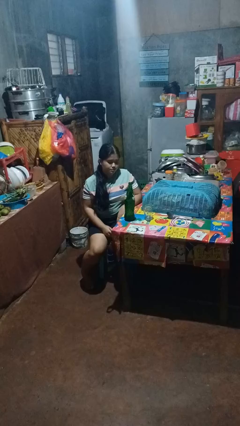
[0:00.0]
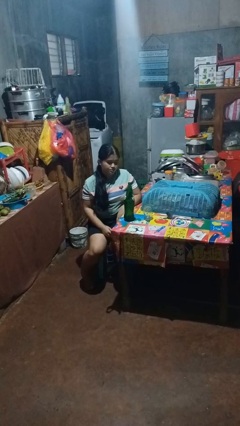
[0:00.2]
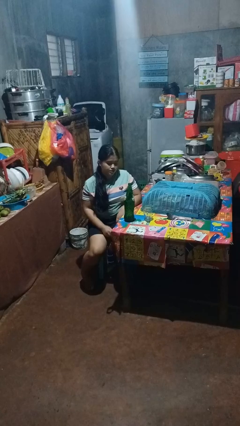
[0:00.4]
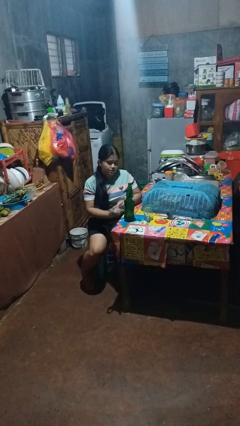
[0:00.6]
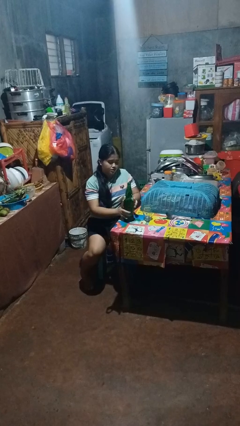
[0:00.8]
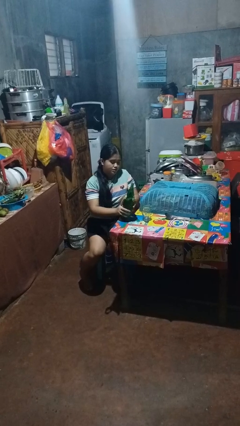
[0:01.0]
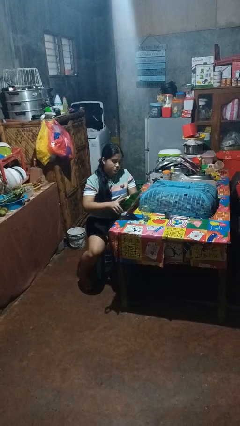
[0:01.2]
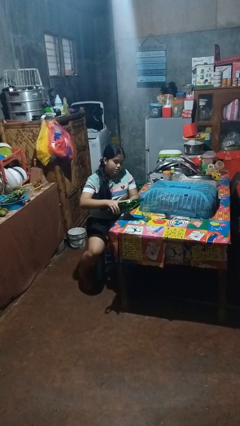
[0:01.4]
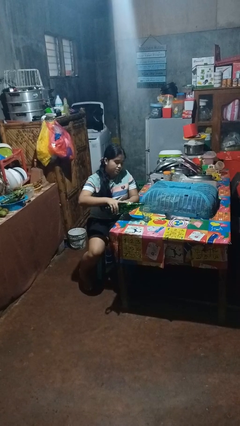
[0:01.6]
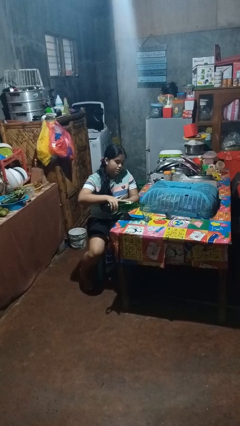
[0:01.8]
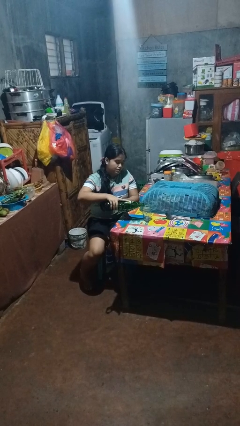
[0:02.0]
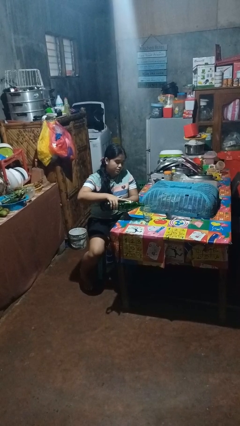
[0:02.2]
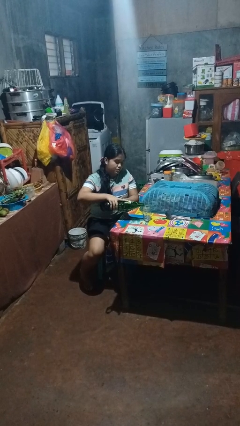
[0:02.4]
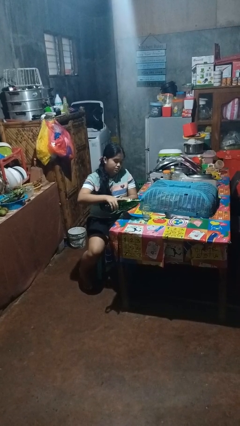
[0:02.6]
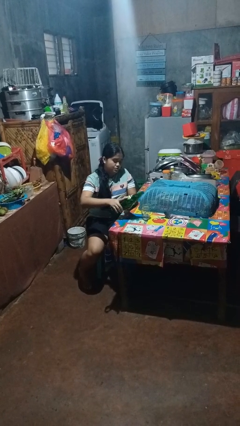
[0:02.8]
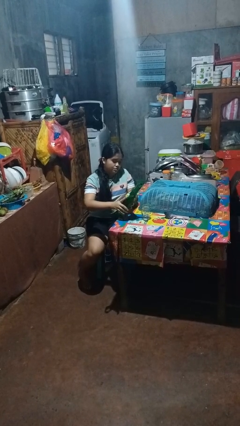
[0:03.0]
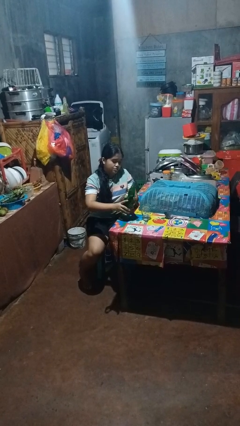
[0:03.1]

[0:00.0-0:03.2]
person pours liquid into cup

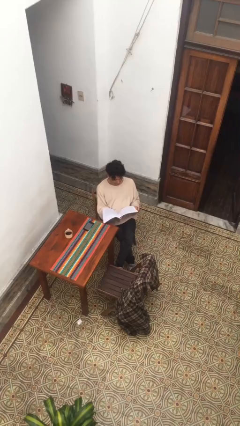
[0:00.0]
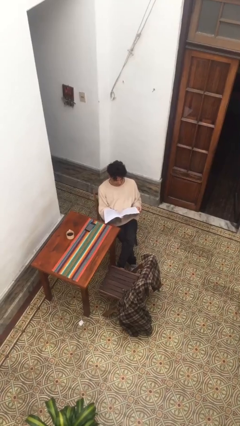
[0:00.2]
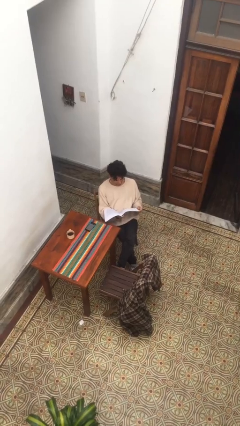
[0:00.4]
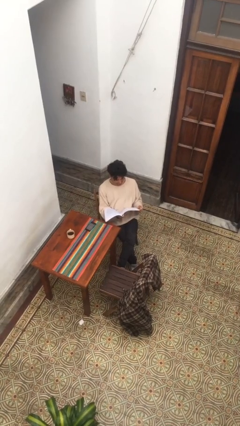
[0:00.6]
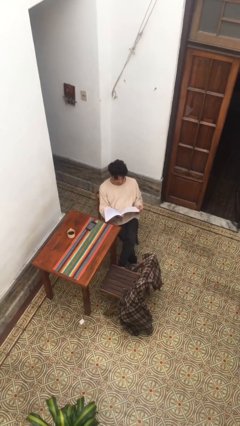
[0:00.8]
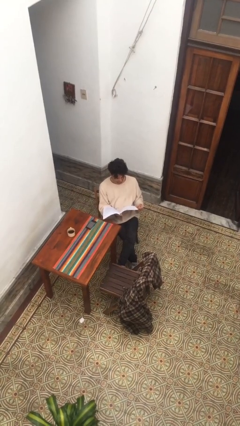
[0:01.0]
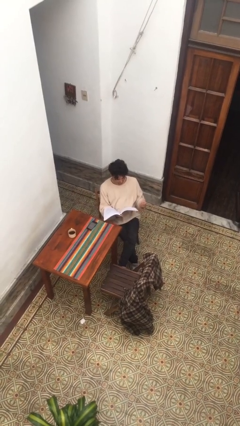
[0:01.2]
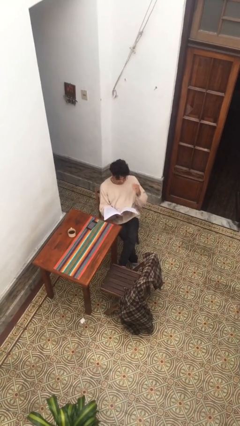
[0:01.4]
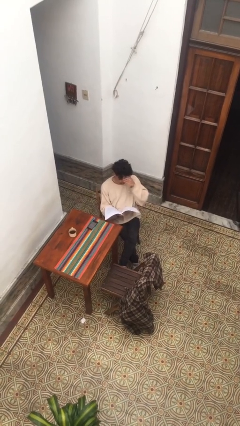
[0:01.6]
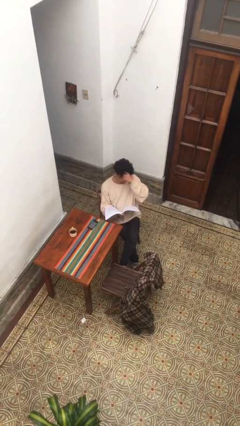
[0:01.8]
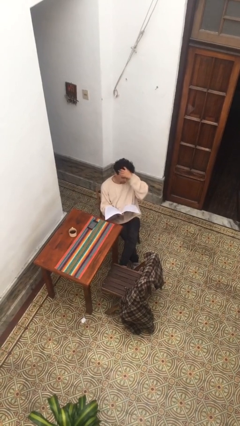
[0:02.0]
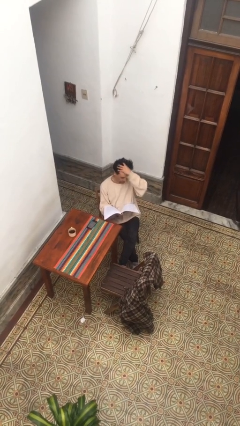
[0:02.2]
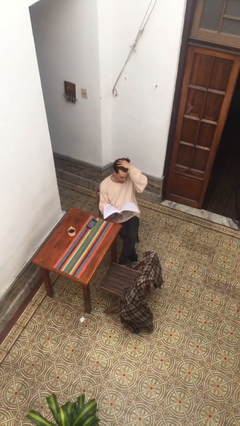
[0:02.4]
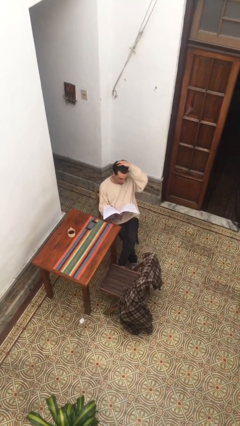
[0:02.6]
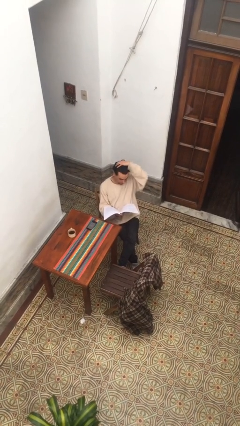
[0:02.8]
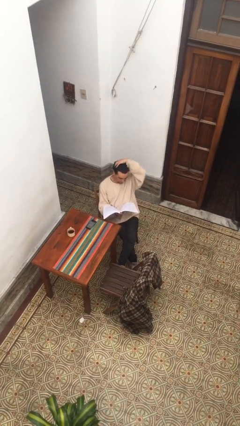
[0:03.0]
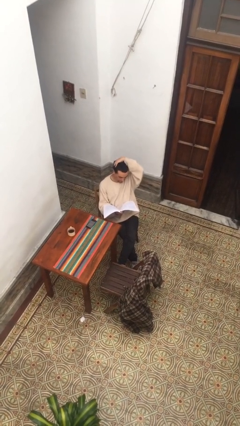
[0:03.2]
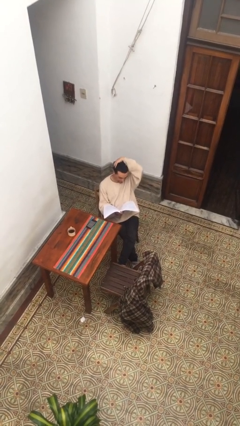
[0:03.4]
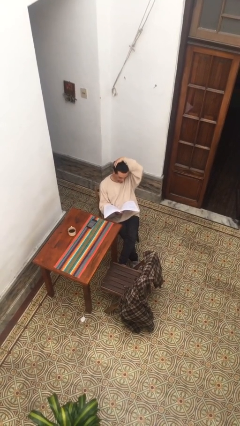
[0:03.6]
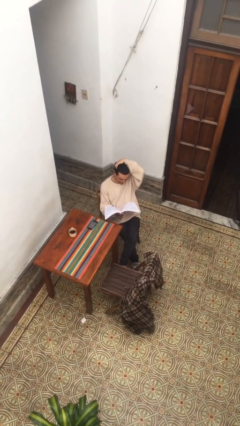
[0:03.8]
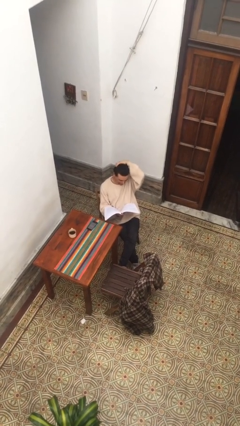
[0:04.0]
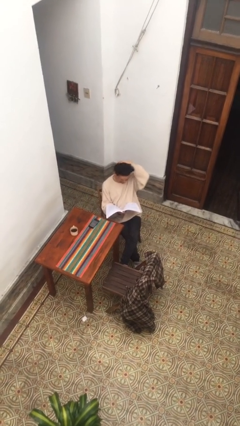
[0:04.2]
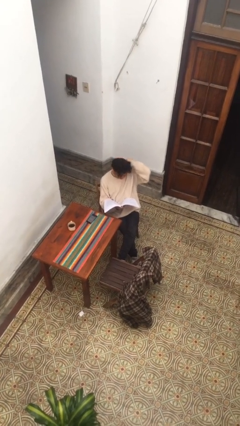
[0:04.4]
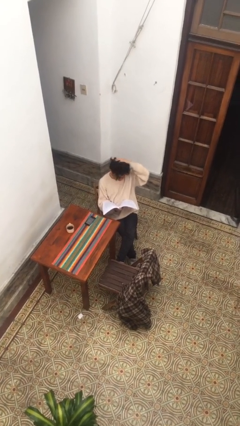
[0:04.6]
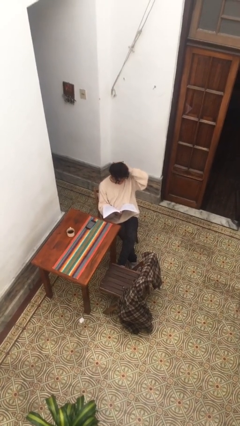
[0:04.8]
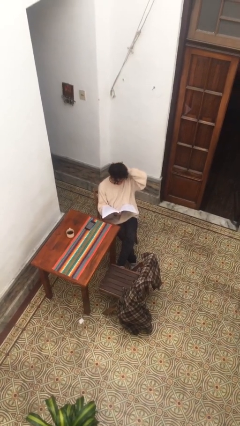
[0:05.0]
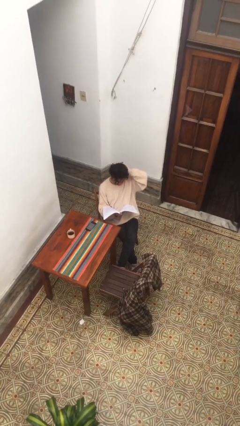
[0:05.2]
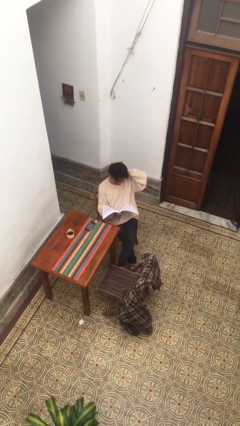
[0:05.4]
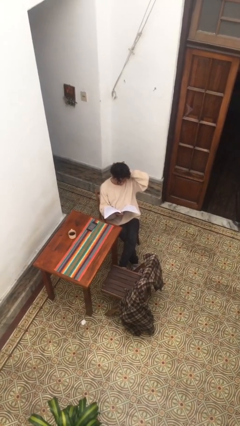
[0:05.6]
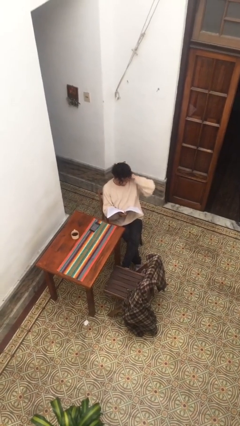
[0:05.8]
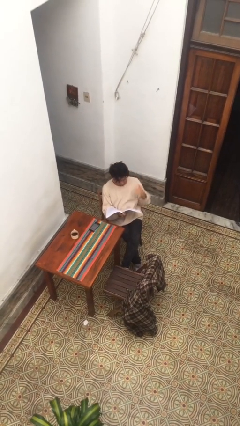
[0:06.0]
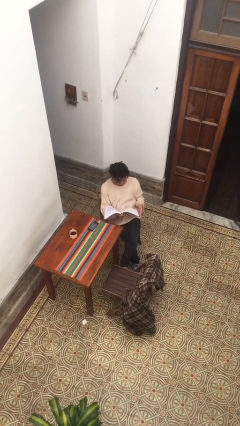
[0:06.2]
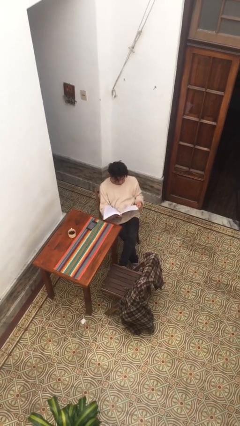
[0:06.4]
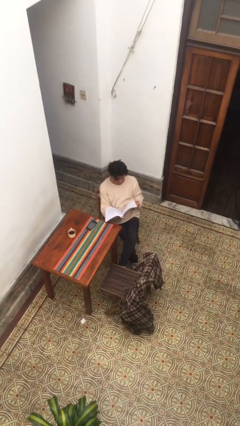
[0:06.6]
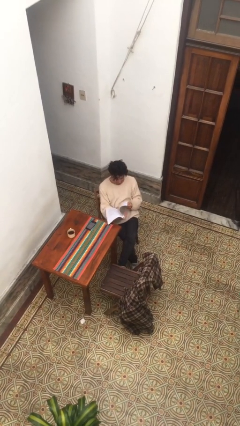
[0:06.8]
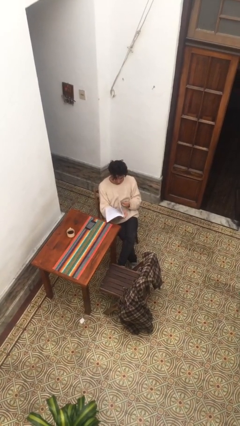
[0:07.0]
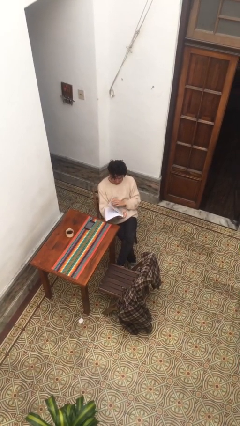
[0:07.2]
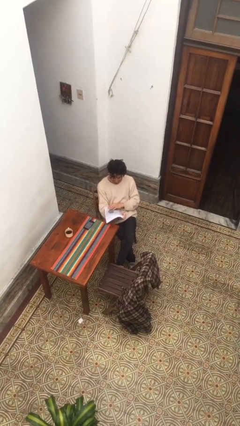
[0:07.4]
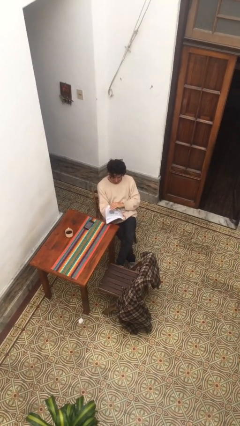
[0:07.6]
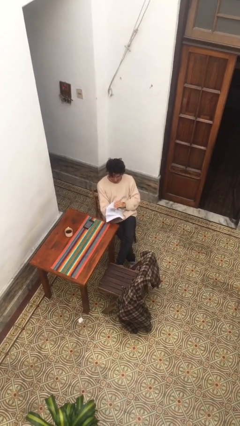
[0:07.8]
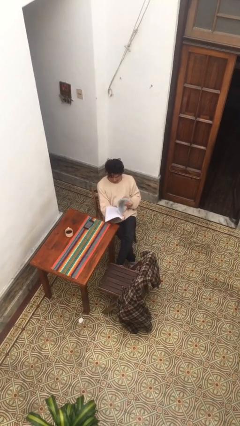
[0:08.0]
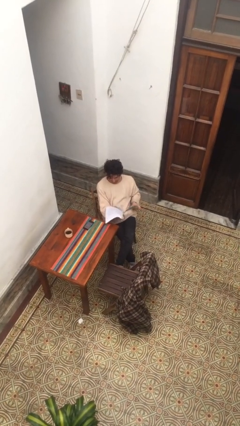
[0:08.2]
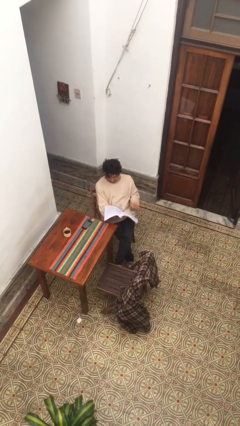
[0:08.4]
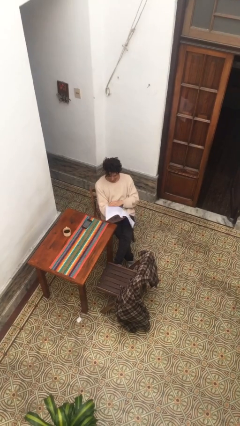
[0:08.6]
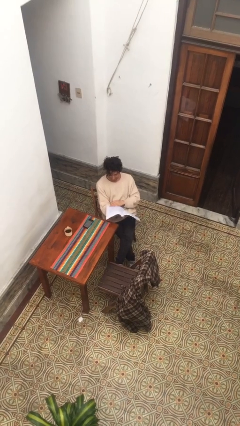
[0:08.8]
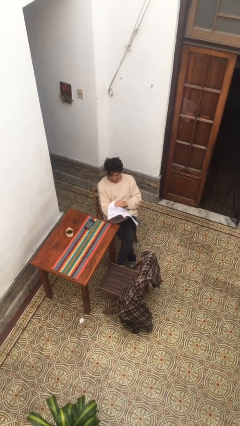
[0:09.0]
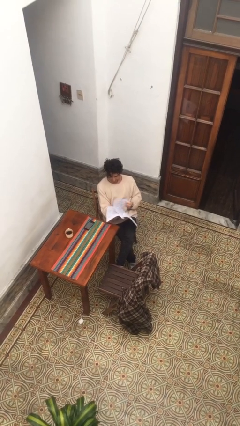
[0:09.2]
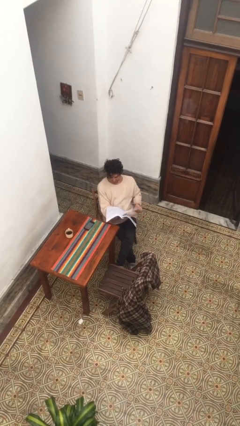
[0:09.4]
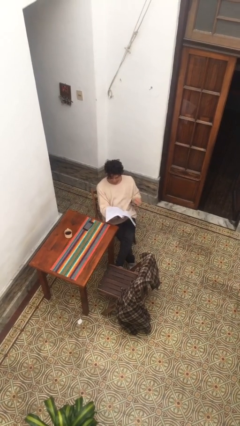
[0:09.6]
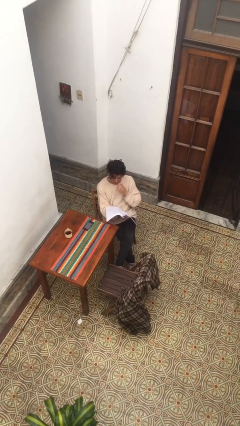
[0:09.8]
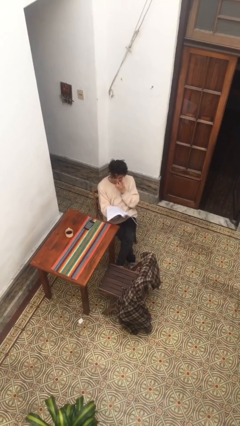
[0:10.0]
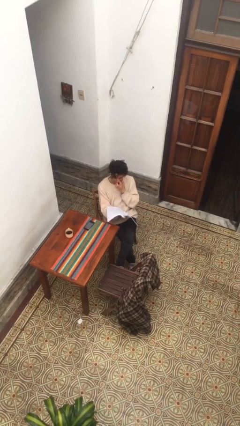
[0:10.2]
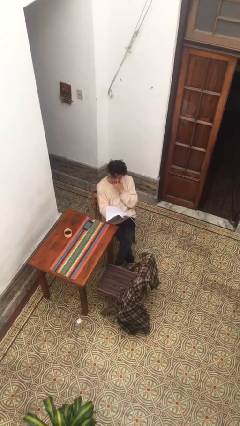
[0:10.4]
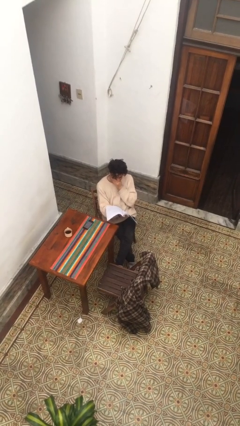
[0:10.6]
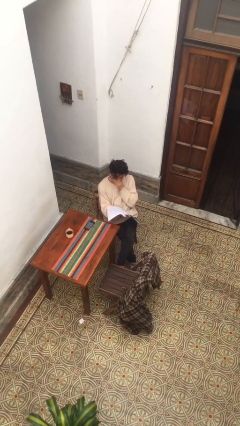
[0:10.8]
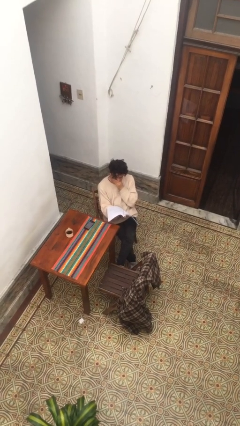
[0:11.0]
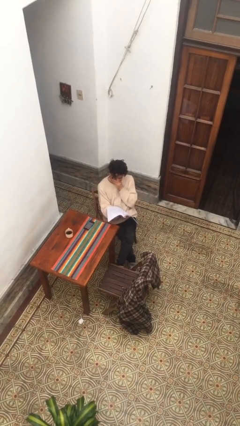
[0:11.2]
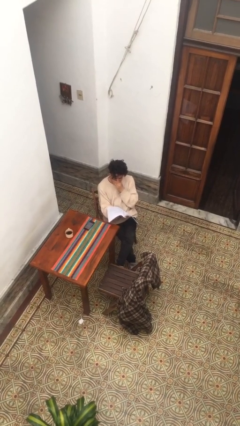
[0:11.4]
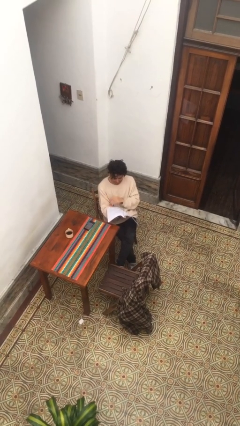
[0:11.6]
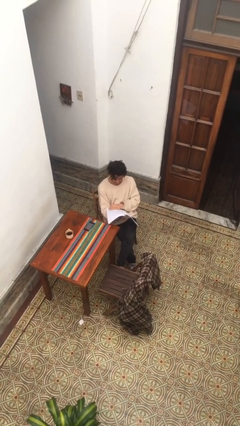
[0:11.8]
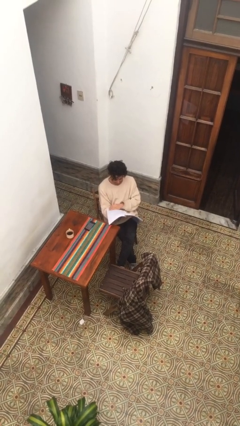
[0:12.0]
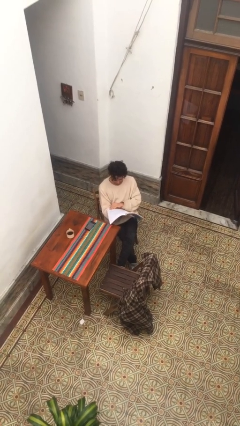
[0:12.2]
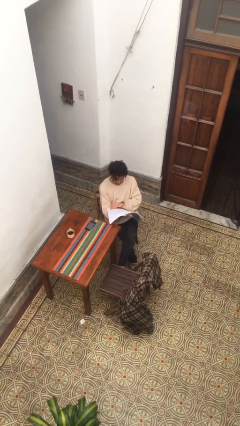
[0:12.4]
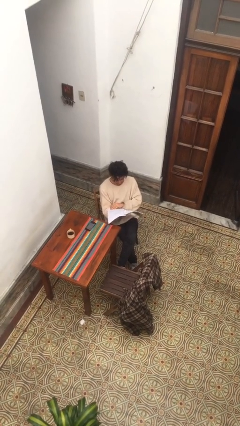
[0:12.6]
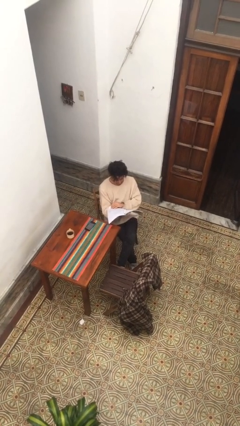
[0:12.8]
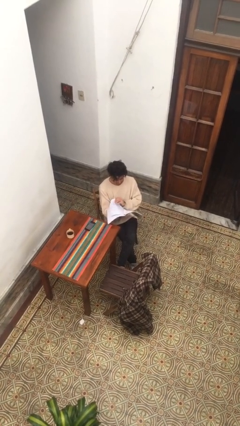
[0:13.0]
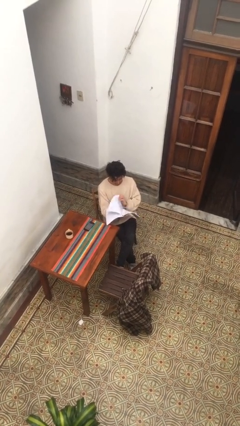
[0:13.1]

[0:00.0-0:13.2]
person reads document

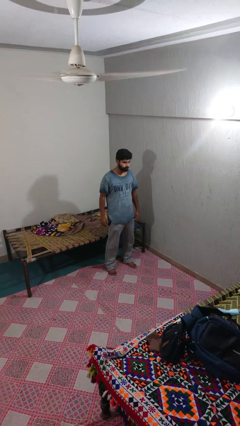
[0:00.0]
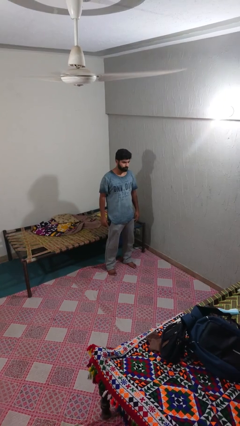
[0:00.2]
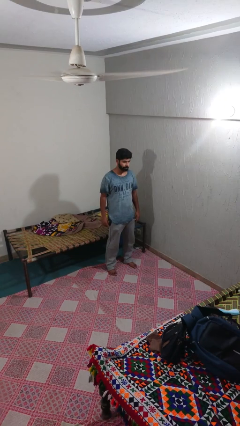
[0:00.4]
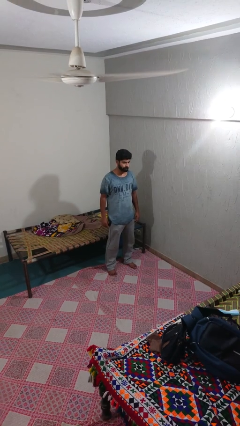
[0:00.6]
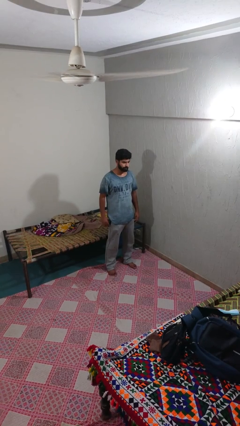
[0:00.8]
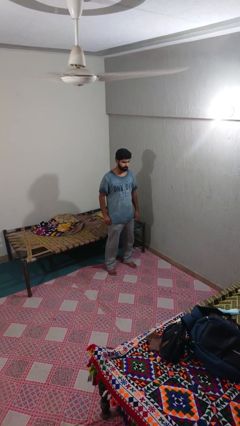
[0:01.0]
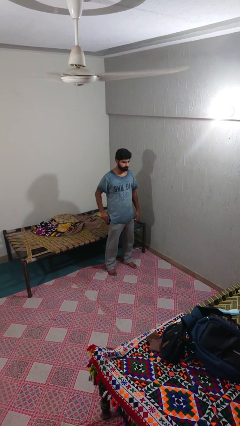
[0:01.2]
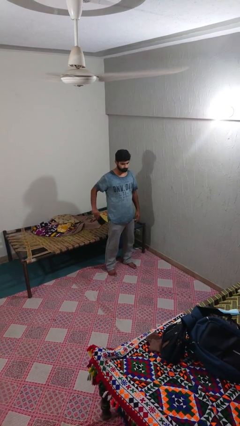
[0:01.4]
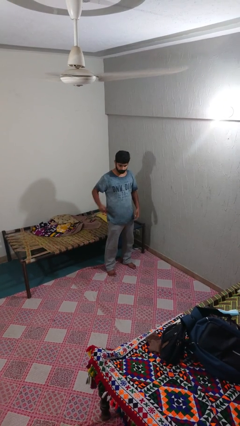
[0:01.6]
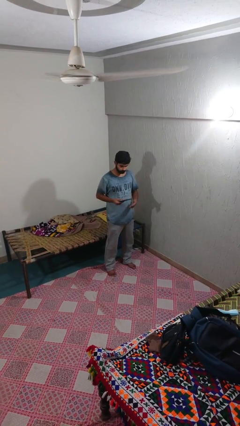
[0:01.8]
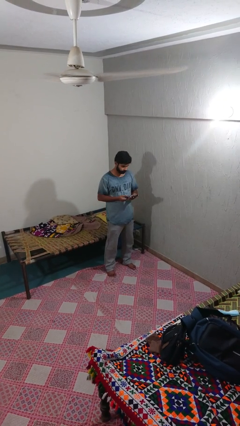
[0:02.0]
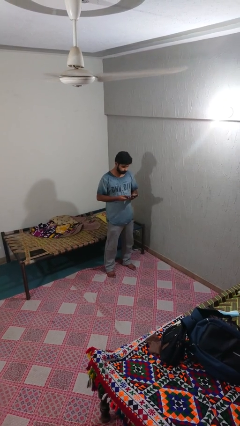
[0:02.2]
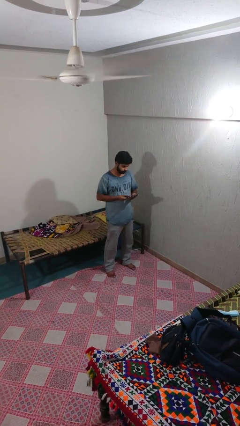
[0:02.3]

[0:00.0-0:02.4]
person takes phone from pocket
